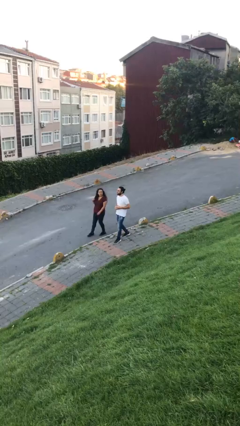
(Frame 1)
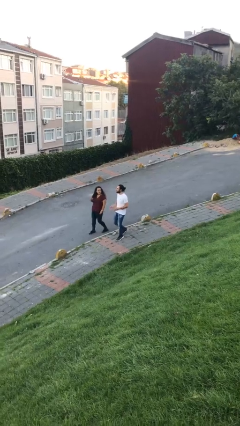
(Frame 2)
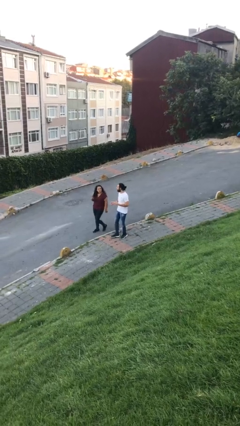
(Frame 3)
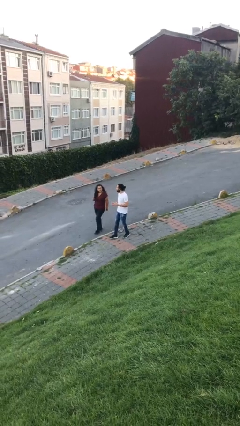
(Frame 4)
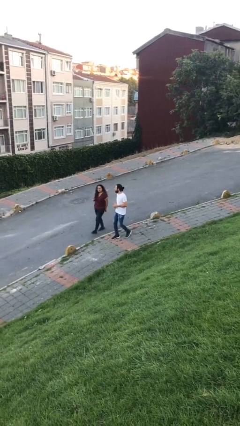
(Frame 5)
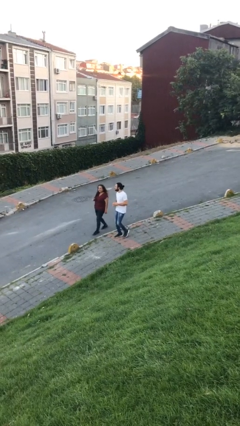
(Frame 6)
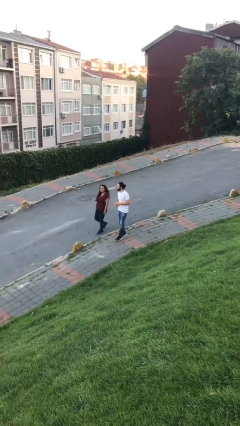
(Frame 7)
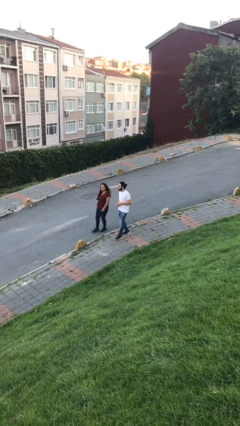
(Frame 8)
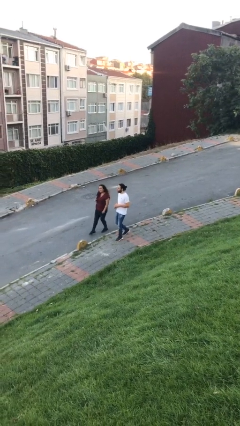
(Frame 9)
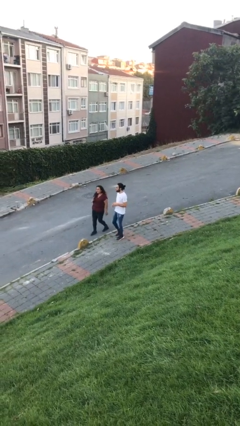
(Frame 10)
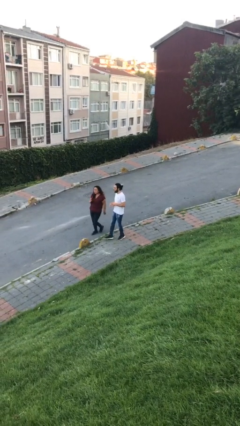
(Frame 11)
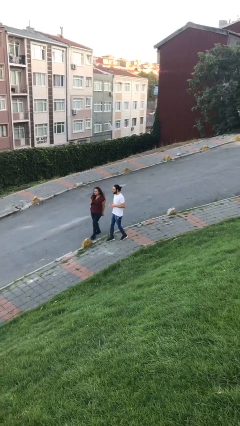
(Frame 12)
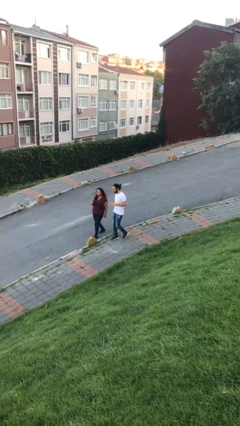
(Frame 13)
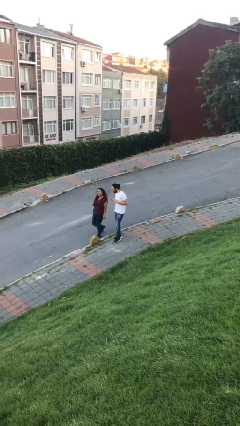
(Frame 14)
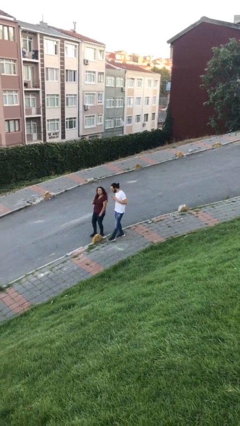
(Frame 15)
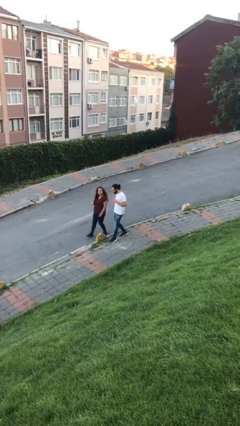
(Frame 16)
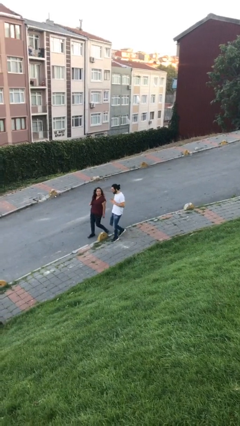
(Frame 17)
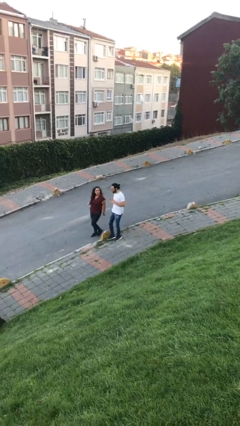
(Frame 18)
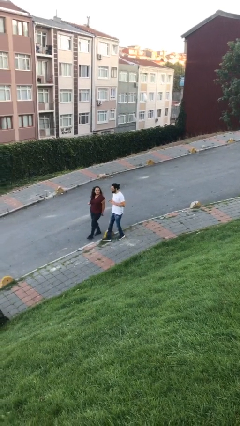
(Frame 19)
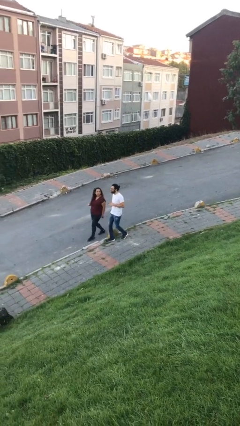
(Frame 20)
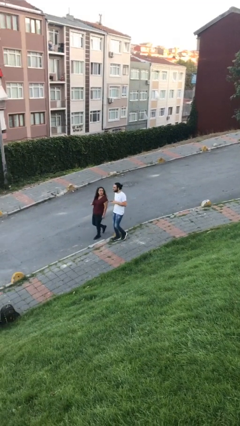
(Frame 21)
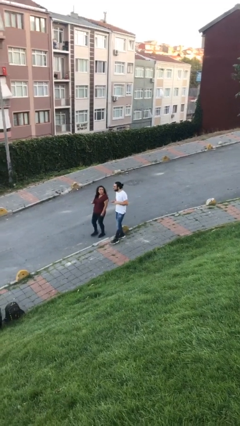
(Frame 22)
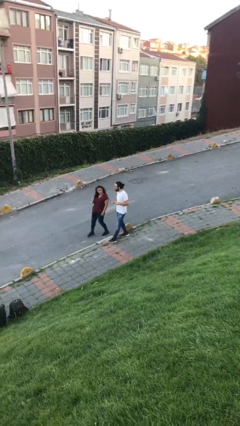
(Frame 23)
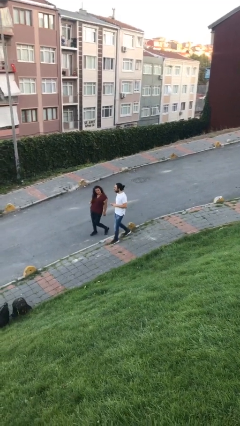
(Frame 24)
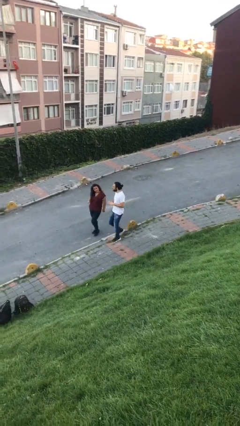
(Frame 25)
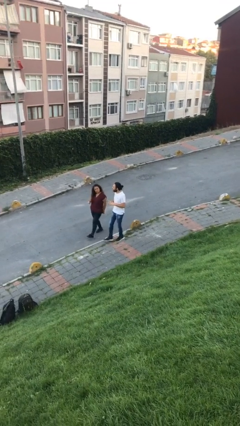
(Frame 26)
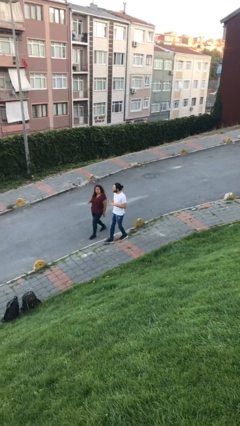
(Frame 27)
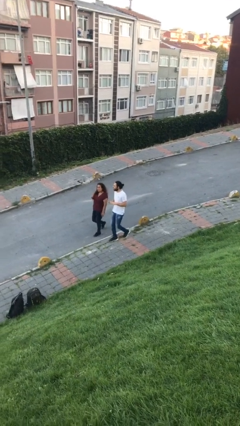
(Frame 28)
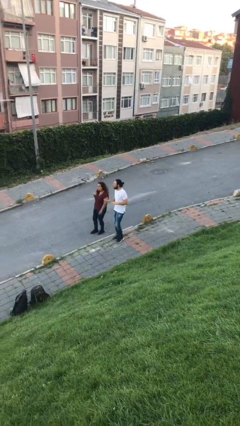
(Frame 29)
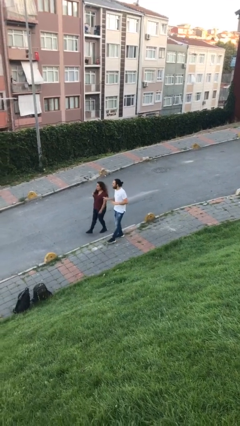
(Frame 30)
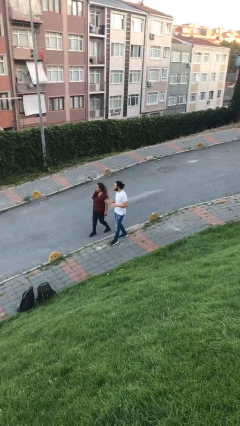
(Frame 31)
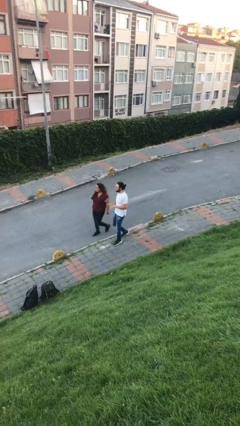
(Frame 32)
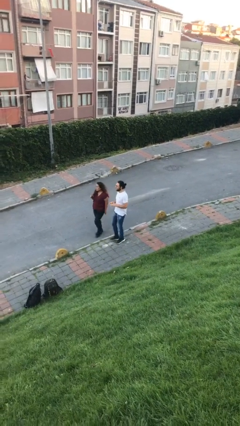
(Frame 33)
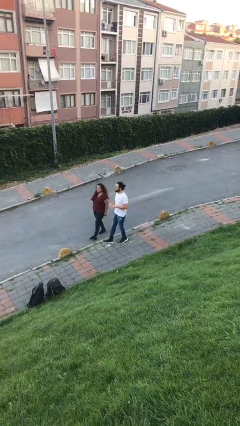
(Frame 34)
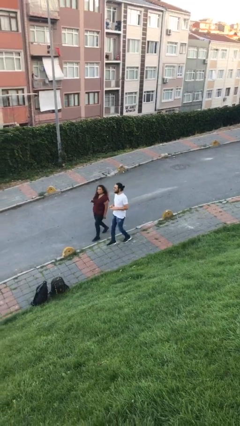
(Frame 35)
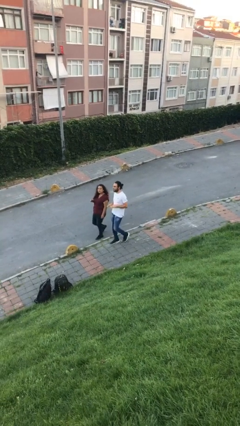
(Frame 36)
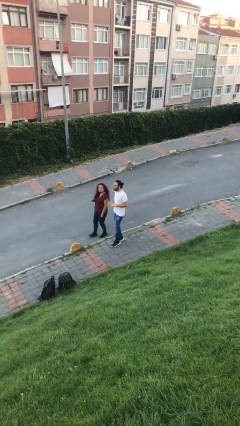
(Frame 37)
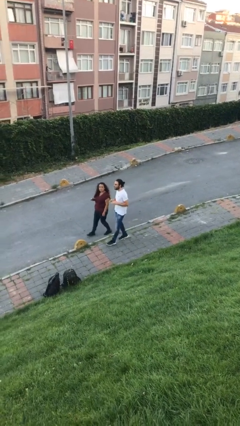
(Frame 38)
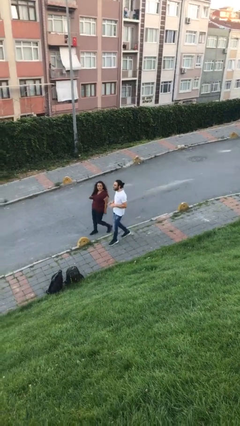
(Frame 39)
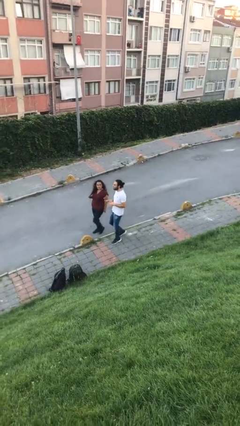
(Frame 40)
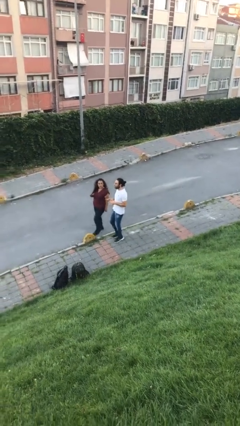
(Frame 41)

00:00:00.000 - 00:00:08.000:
person talks to person

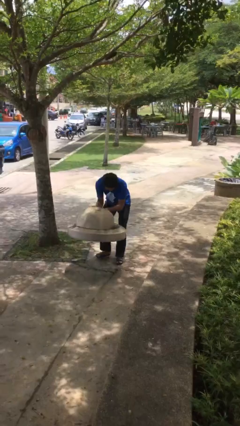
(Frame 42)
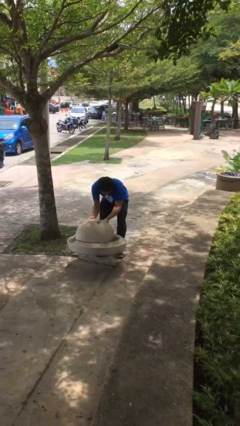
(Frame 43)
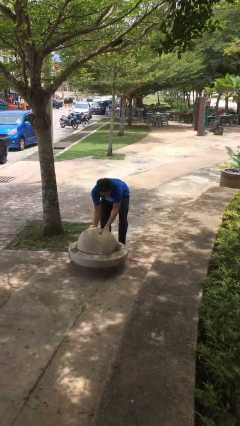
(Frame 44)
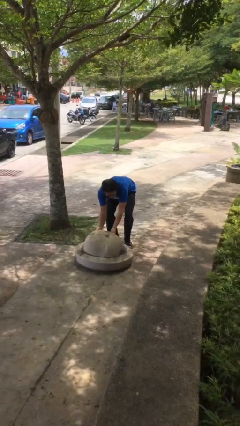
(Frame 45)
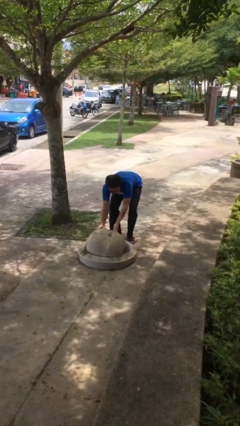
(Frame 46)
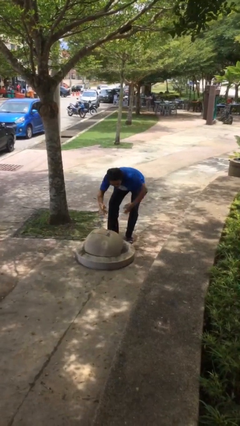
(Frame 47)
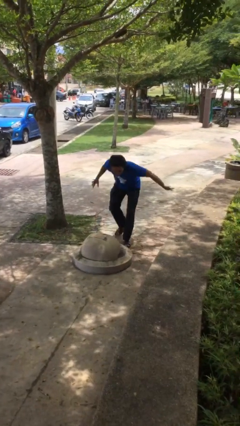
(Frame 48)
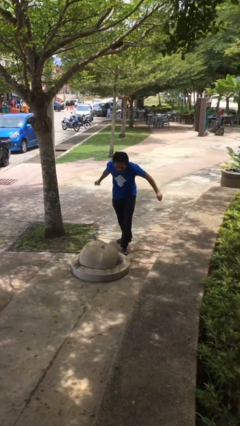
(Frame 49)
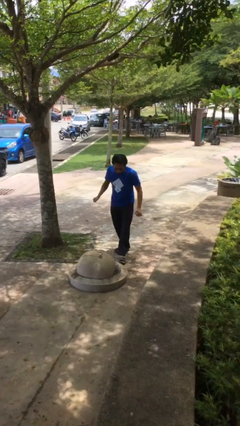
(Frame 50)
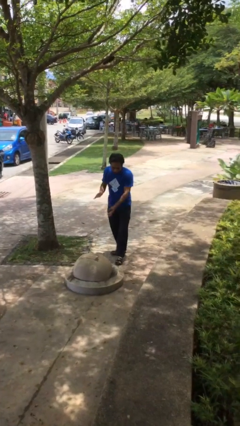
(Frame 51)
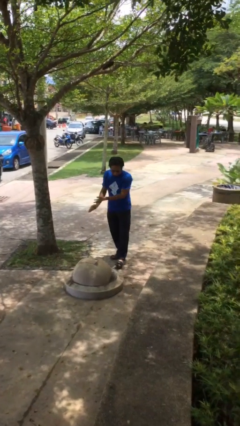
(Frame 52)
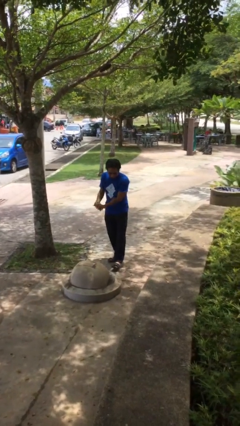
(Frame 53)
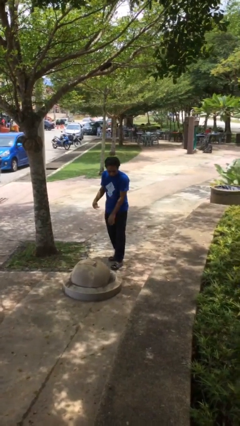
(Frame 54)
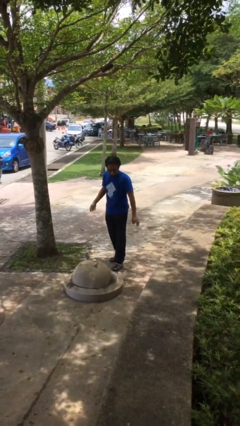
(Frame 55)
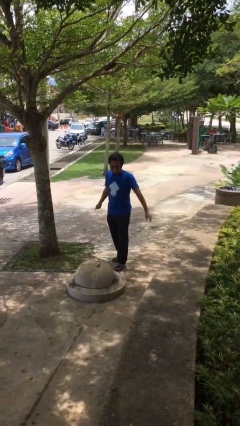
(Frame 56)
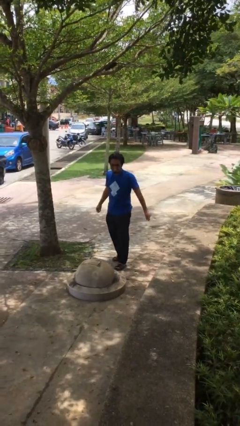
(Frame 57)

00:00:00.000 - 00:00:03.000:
person puts down object on floor

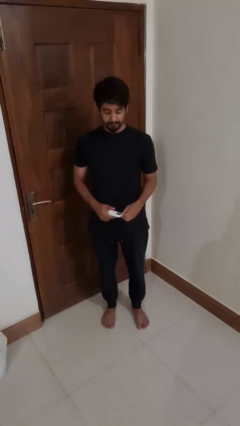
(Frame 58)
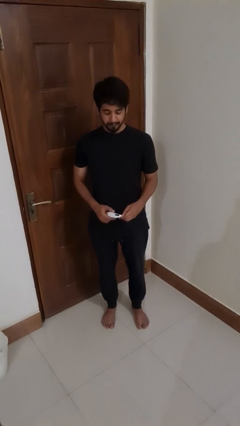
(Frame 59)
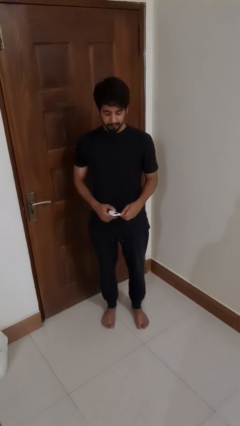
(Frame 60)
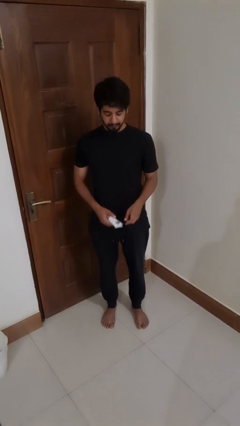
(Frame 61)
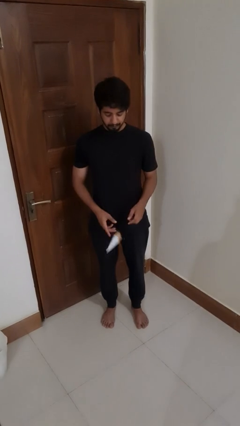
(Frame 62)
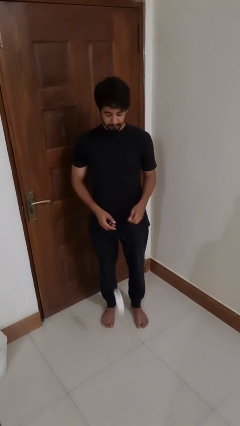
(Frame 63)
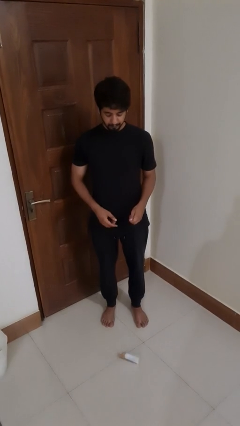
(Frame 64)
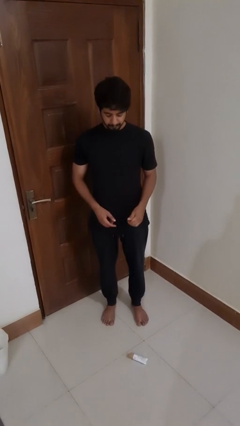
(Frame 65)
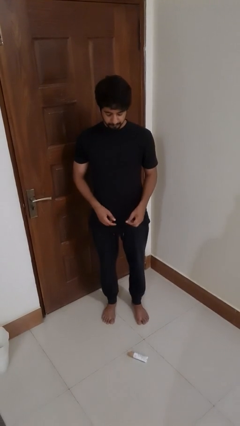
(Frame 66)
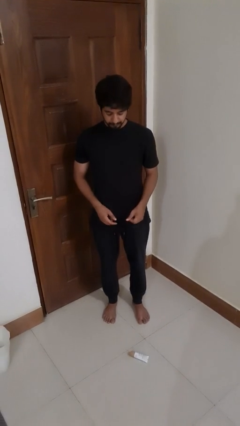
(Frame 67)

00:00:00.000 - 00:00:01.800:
person drops object

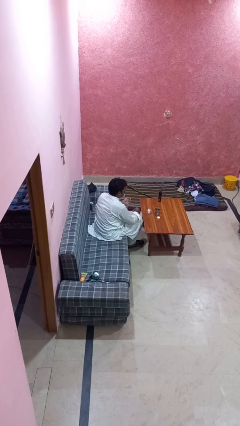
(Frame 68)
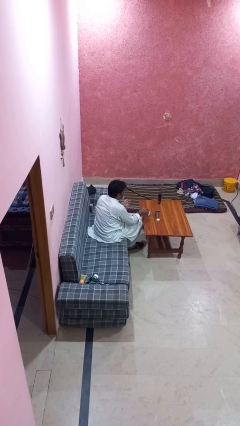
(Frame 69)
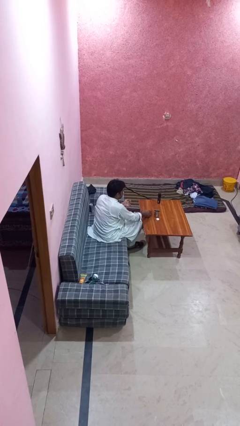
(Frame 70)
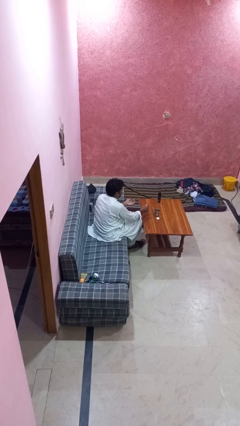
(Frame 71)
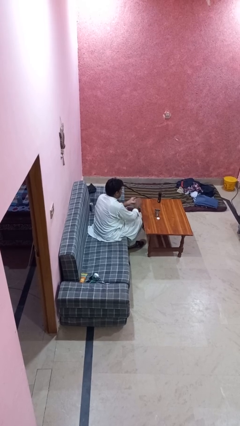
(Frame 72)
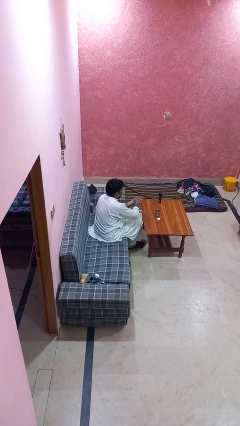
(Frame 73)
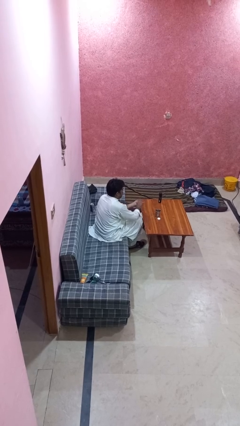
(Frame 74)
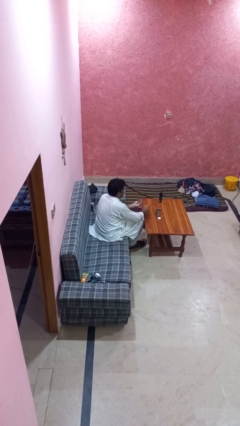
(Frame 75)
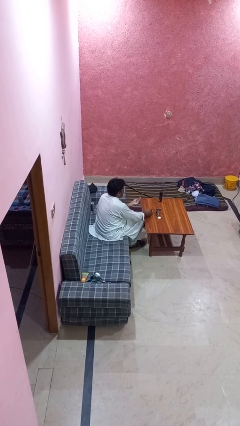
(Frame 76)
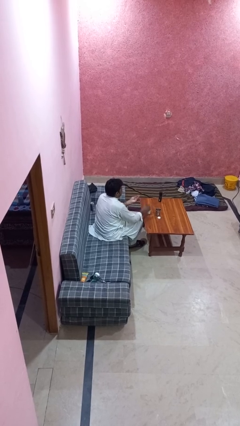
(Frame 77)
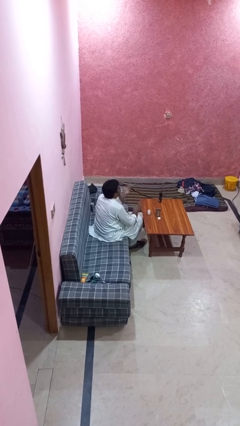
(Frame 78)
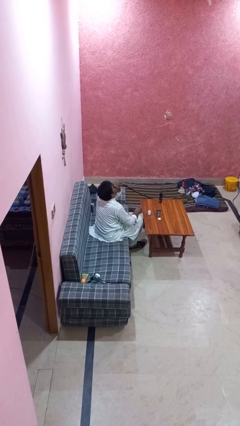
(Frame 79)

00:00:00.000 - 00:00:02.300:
person takes medicine pills

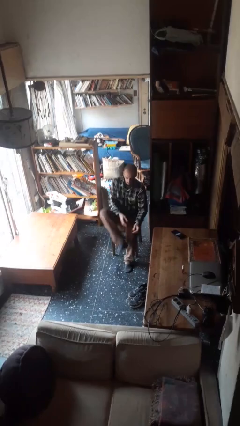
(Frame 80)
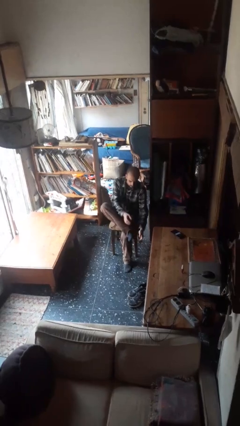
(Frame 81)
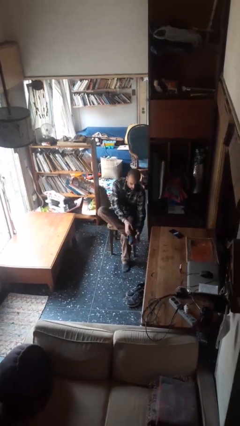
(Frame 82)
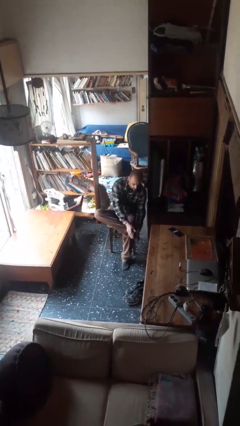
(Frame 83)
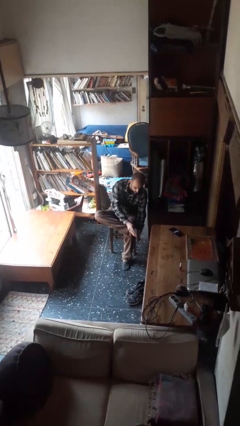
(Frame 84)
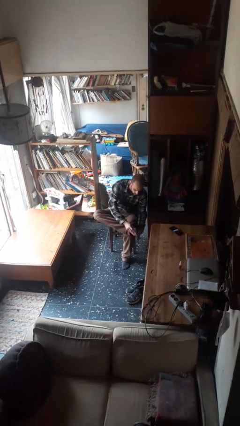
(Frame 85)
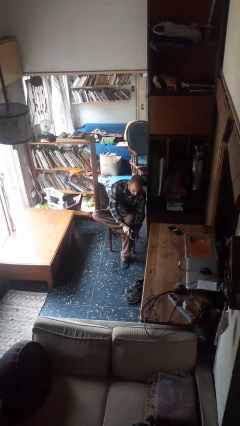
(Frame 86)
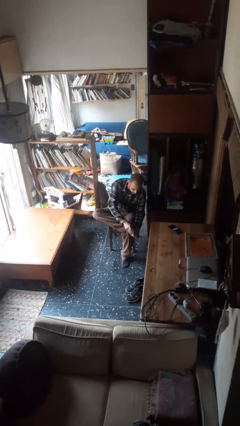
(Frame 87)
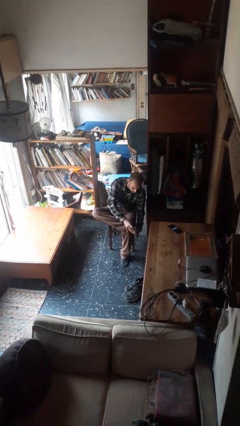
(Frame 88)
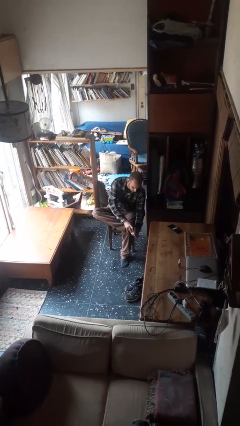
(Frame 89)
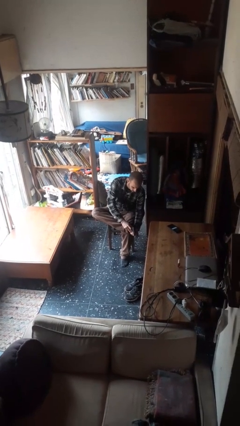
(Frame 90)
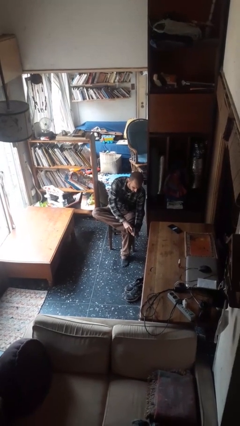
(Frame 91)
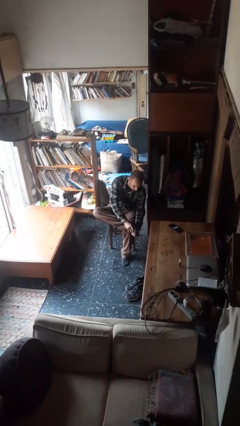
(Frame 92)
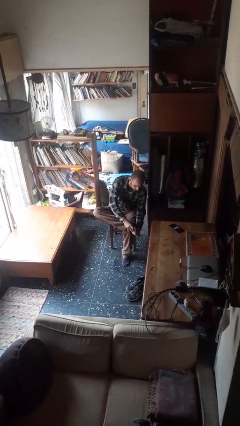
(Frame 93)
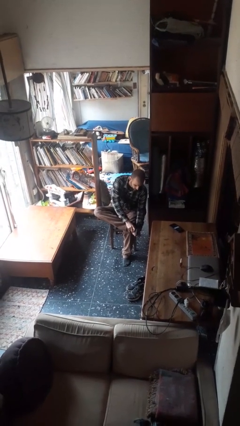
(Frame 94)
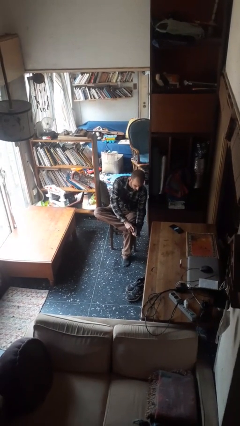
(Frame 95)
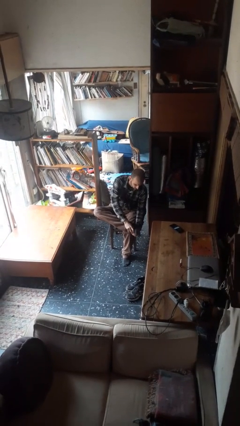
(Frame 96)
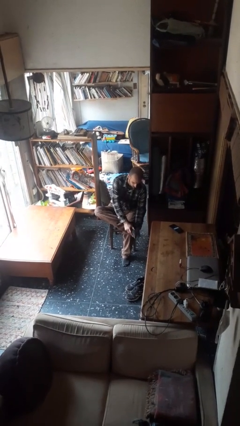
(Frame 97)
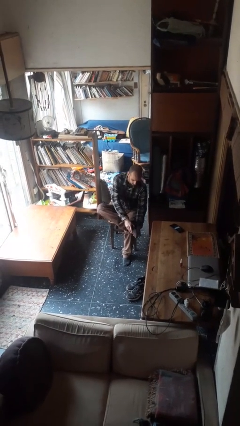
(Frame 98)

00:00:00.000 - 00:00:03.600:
person rubs foot
